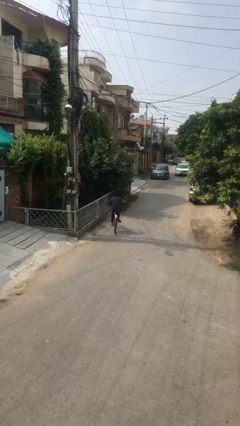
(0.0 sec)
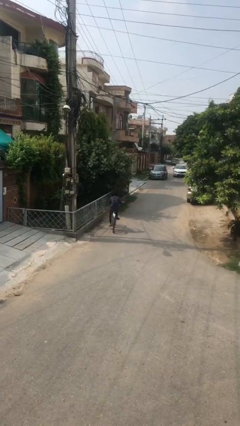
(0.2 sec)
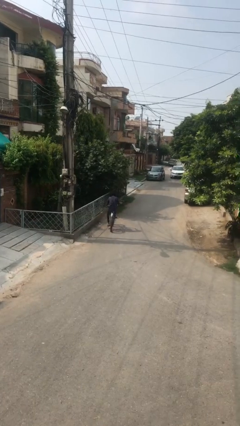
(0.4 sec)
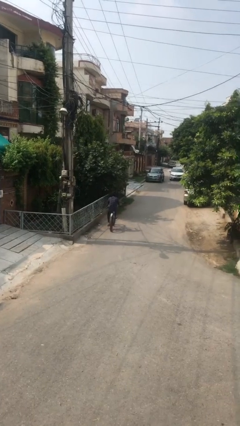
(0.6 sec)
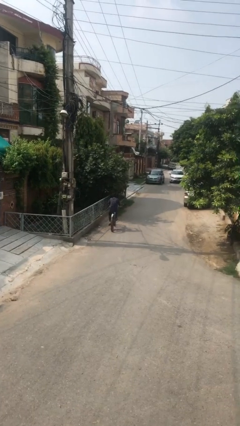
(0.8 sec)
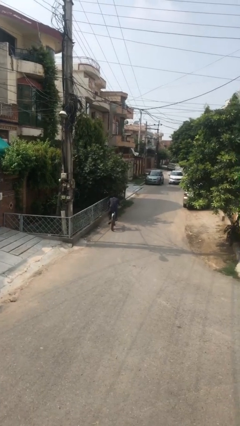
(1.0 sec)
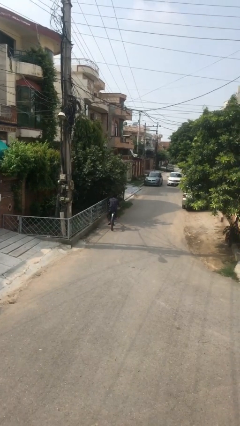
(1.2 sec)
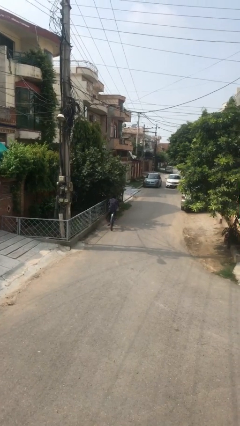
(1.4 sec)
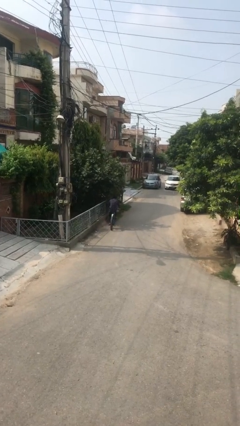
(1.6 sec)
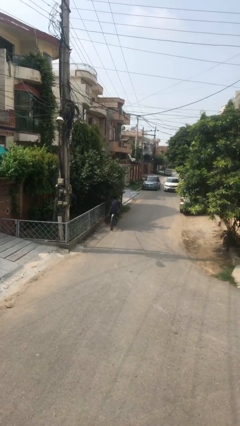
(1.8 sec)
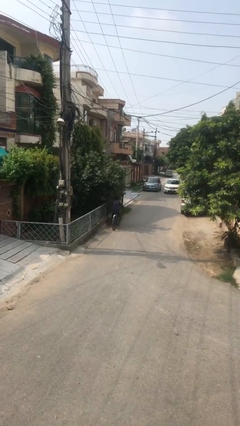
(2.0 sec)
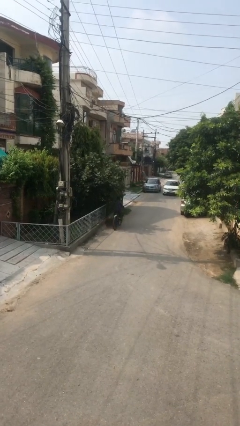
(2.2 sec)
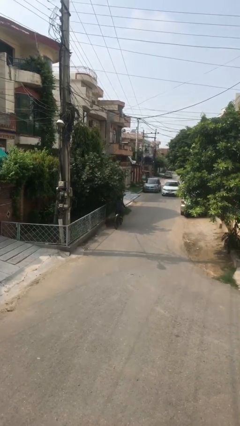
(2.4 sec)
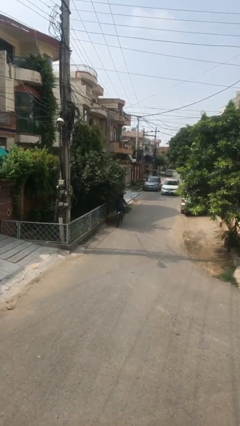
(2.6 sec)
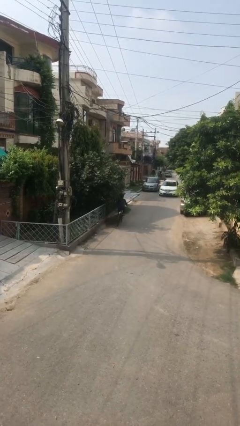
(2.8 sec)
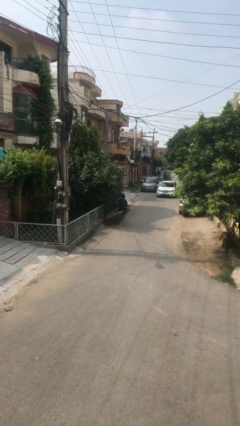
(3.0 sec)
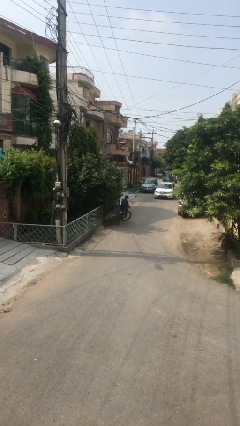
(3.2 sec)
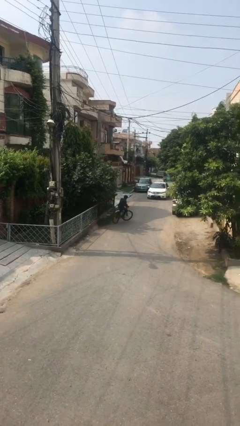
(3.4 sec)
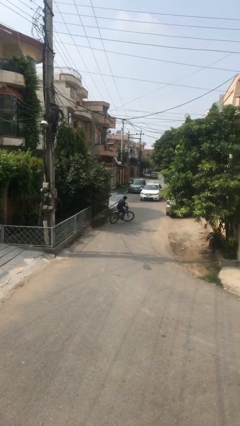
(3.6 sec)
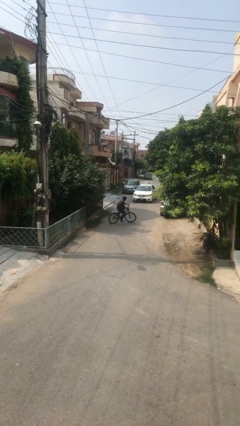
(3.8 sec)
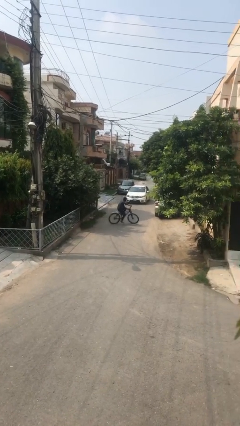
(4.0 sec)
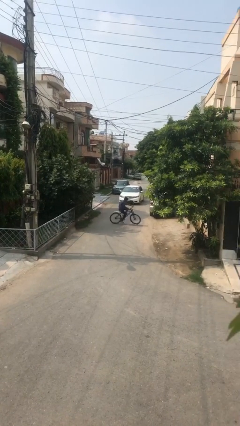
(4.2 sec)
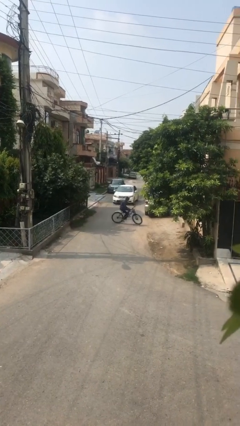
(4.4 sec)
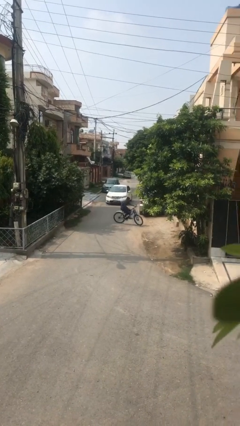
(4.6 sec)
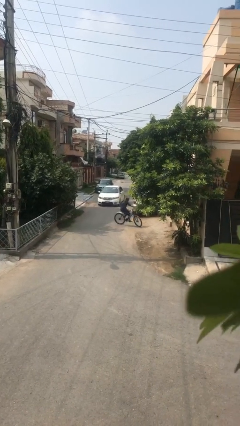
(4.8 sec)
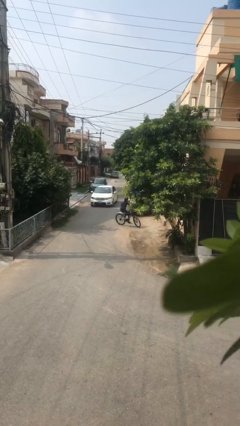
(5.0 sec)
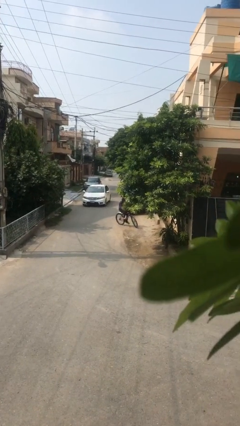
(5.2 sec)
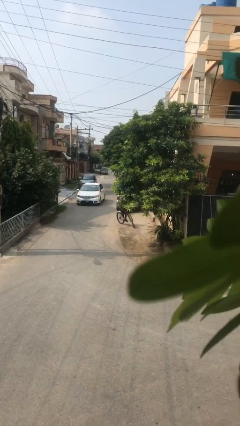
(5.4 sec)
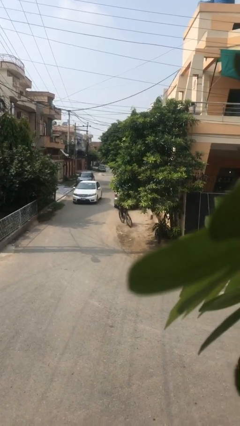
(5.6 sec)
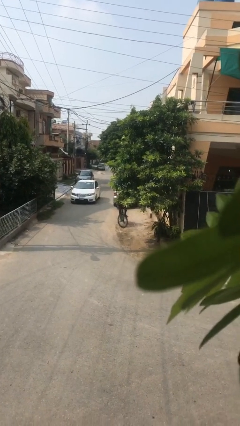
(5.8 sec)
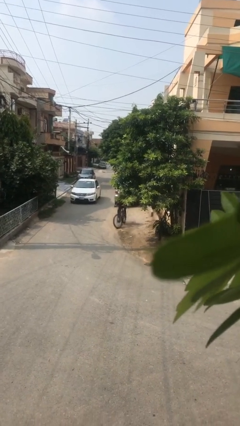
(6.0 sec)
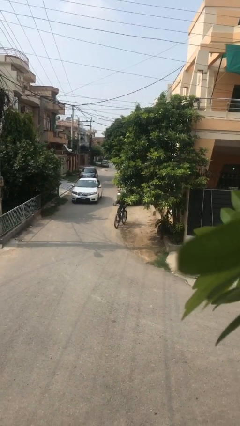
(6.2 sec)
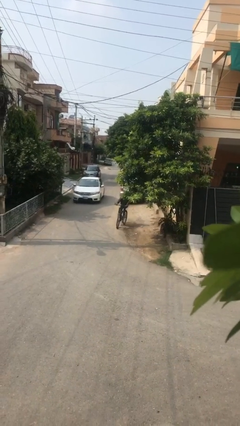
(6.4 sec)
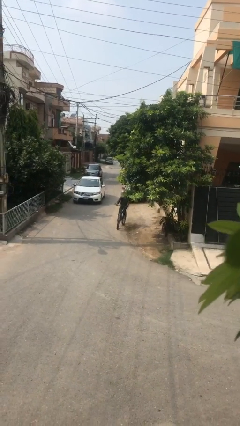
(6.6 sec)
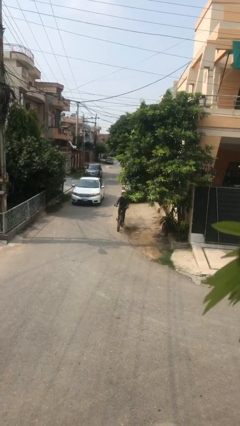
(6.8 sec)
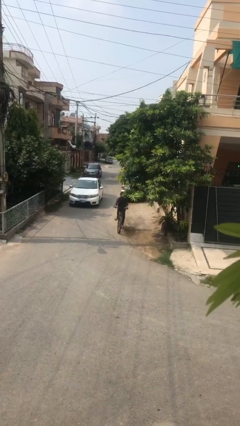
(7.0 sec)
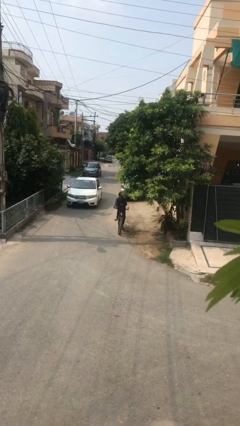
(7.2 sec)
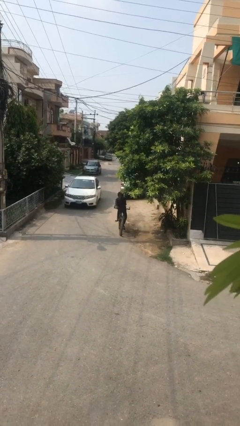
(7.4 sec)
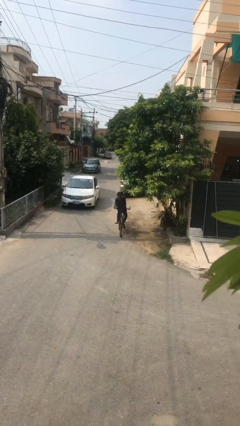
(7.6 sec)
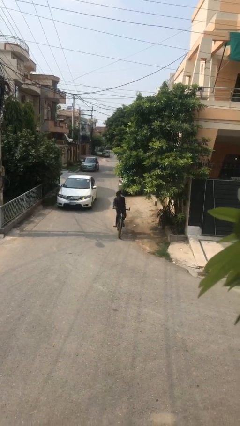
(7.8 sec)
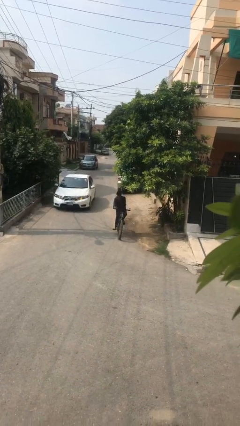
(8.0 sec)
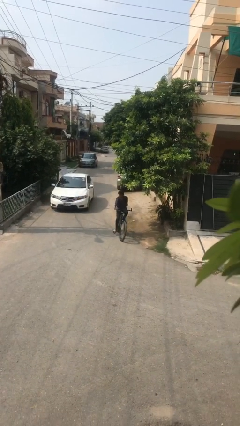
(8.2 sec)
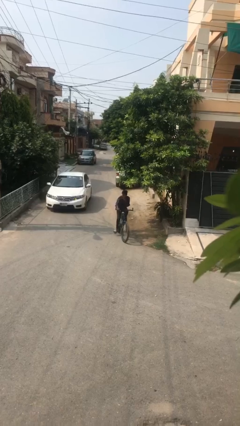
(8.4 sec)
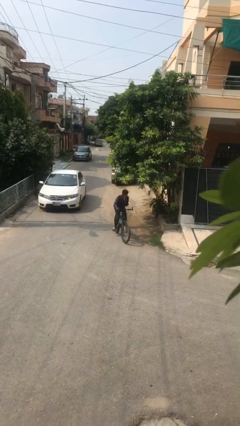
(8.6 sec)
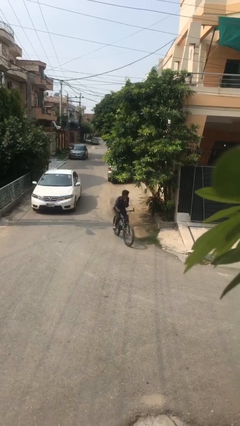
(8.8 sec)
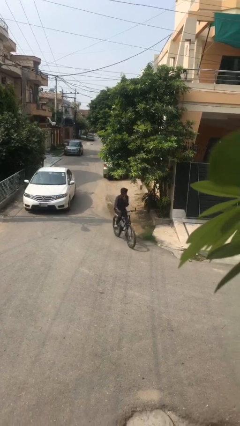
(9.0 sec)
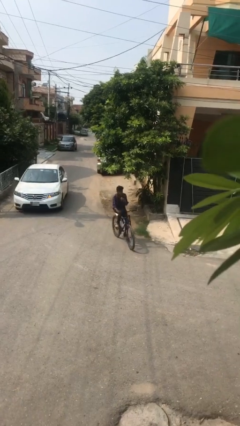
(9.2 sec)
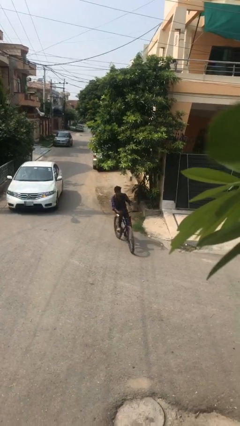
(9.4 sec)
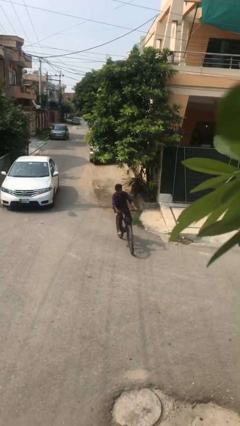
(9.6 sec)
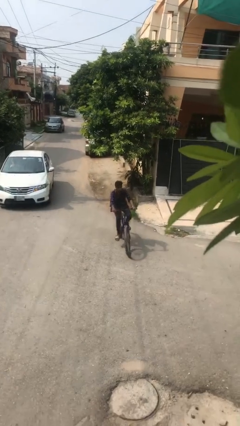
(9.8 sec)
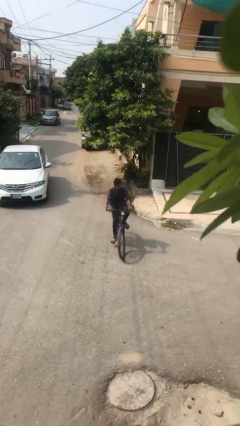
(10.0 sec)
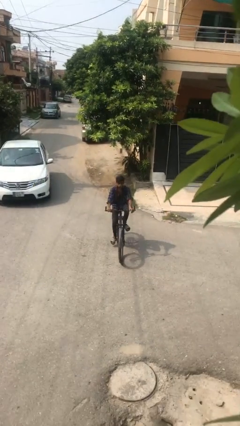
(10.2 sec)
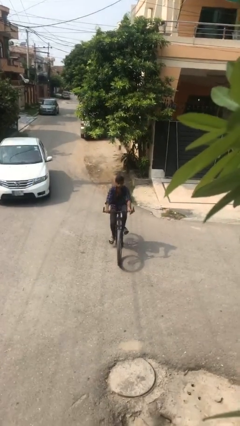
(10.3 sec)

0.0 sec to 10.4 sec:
person rides bicycle

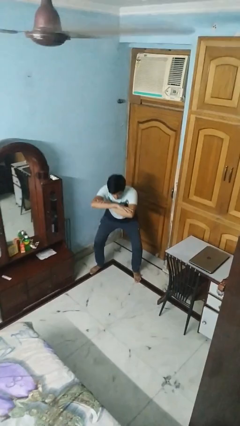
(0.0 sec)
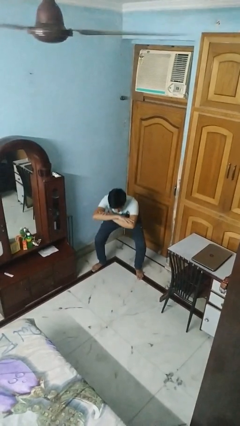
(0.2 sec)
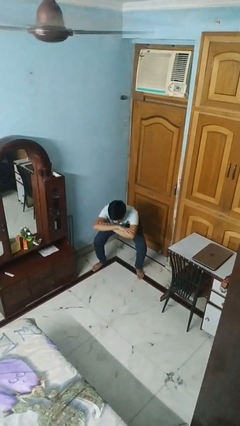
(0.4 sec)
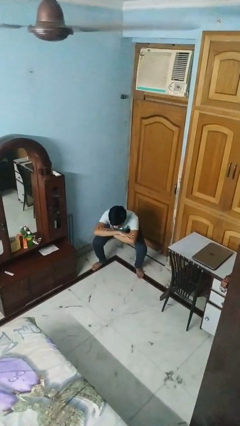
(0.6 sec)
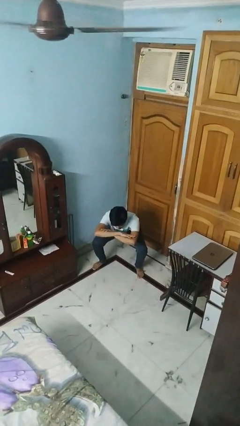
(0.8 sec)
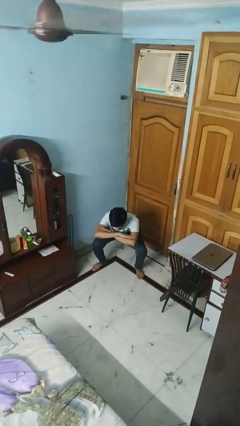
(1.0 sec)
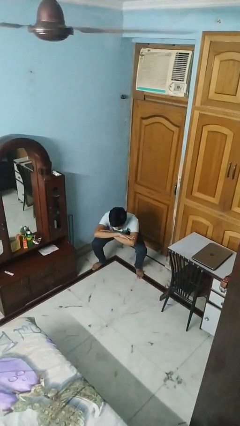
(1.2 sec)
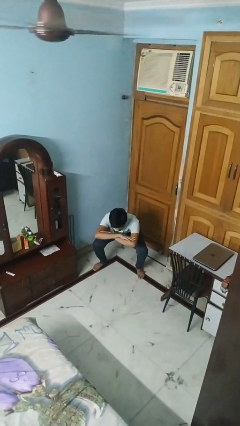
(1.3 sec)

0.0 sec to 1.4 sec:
person squats

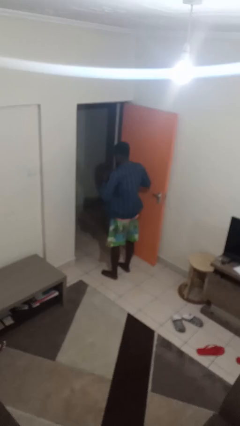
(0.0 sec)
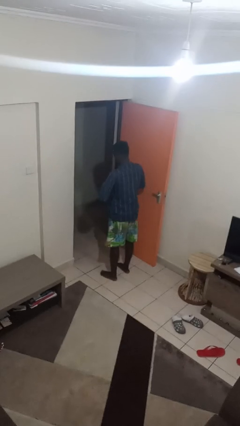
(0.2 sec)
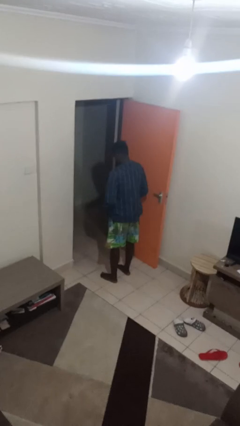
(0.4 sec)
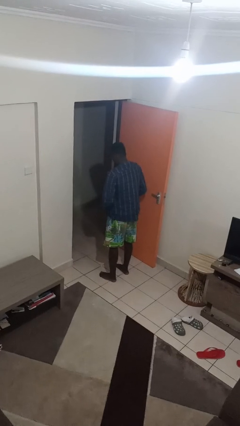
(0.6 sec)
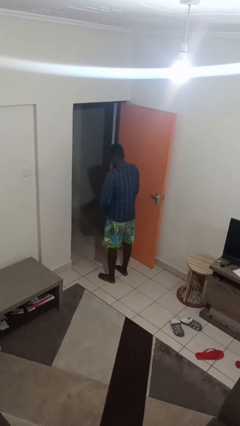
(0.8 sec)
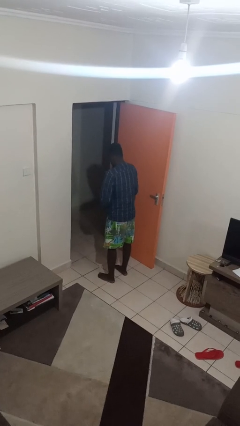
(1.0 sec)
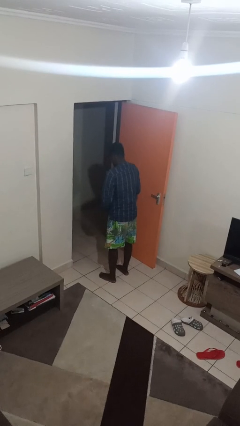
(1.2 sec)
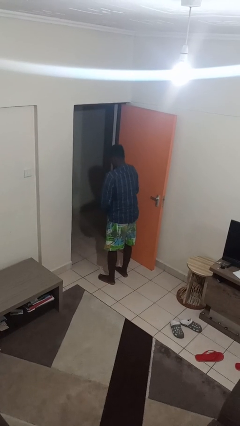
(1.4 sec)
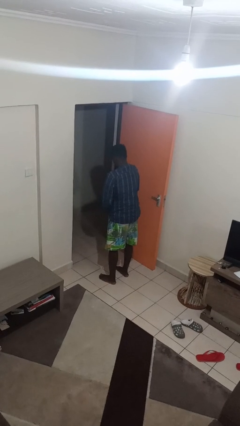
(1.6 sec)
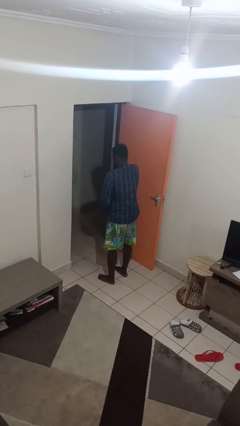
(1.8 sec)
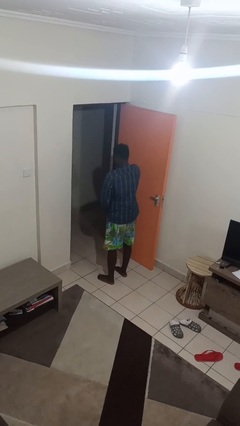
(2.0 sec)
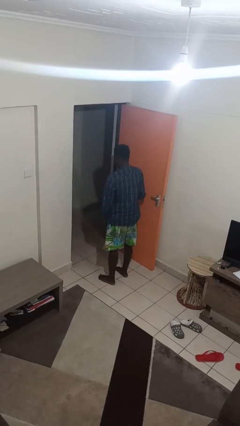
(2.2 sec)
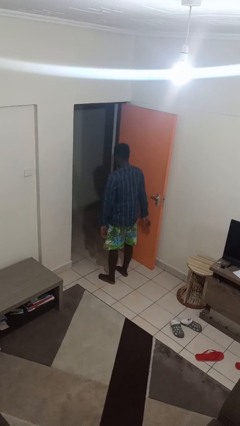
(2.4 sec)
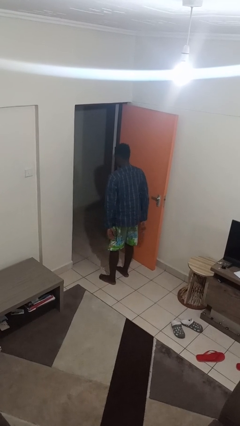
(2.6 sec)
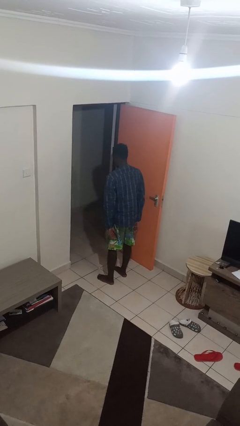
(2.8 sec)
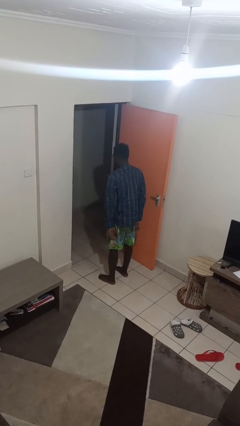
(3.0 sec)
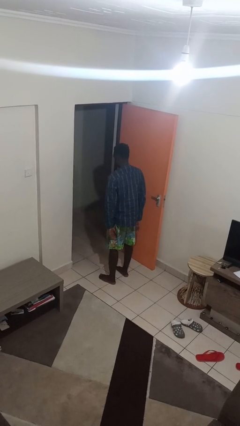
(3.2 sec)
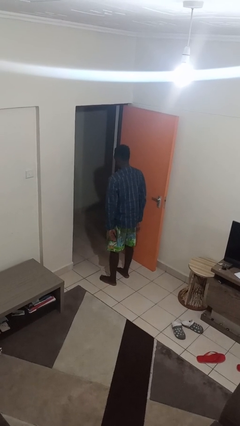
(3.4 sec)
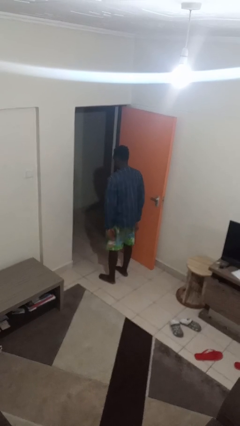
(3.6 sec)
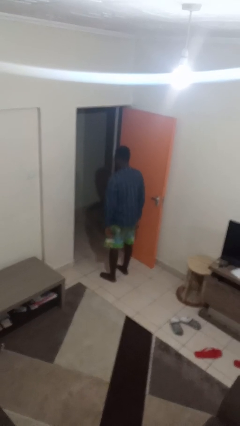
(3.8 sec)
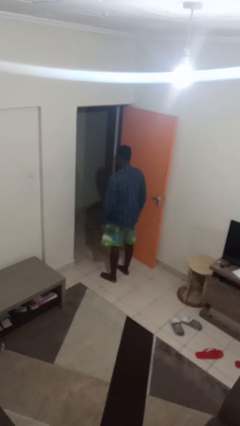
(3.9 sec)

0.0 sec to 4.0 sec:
person zips up jacket

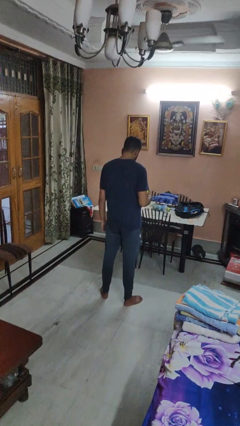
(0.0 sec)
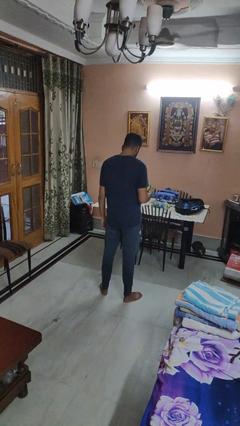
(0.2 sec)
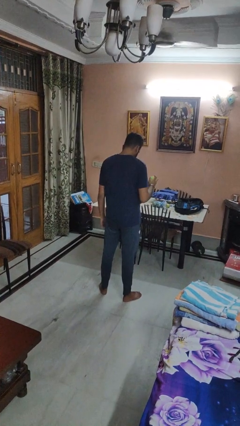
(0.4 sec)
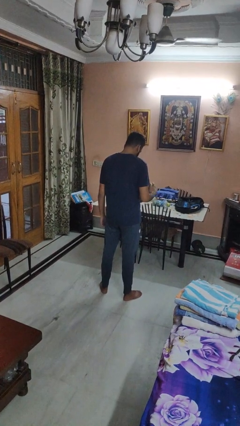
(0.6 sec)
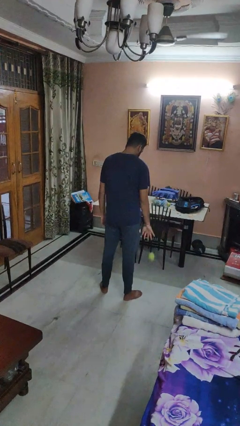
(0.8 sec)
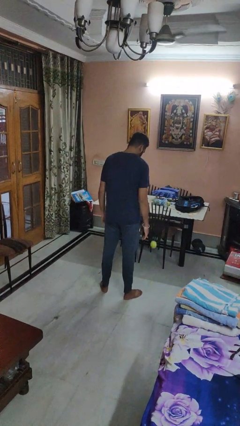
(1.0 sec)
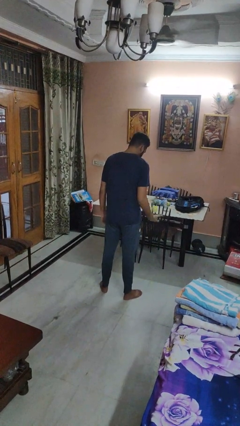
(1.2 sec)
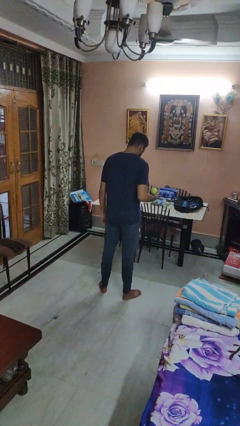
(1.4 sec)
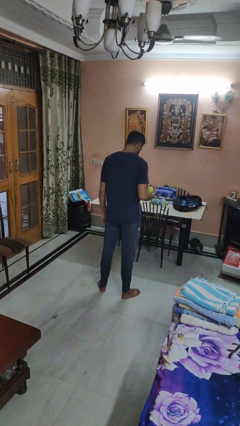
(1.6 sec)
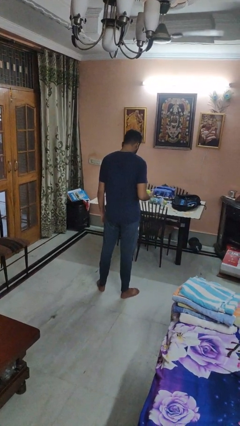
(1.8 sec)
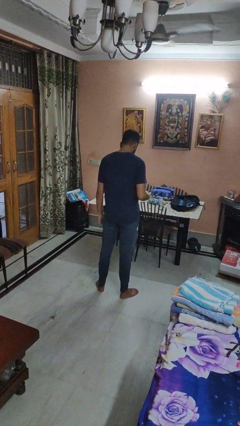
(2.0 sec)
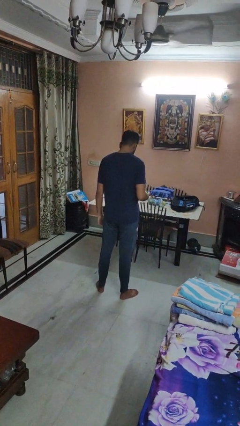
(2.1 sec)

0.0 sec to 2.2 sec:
person bounces ball on floor
